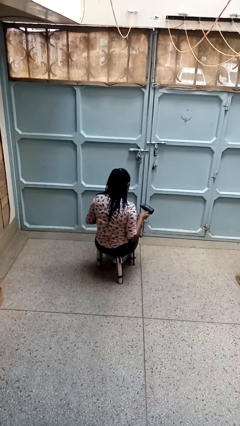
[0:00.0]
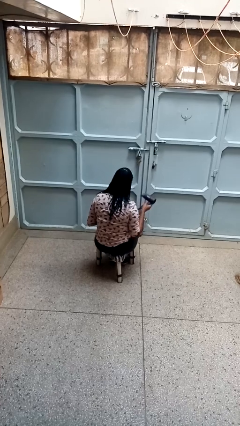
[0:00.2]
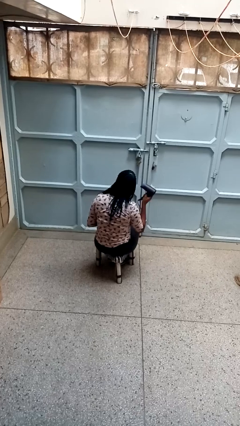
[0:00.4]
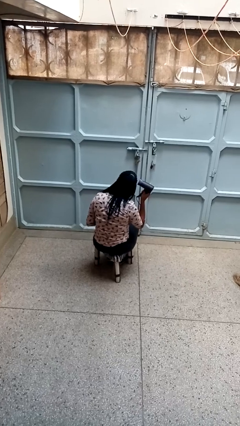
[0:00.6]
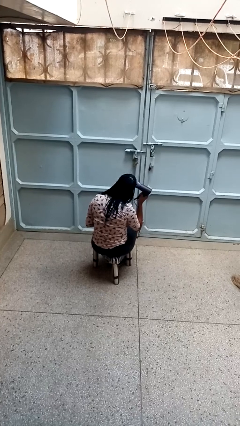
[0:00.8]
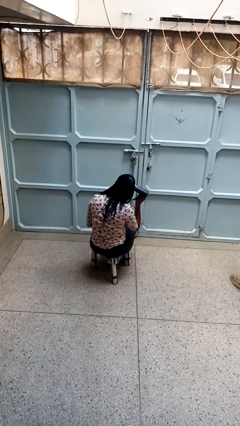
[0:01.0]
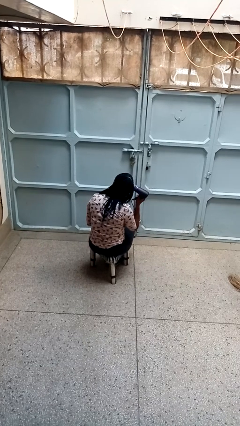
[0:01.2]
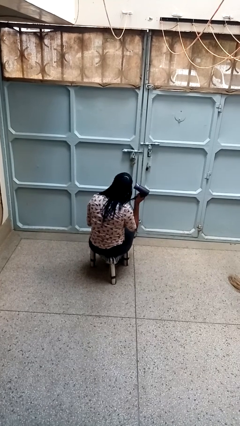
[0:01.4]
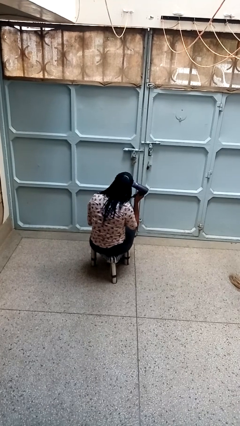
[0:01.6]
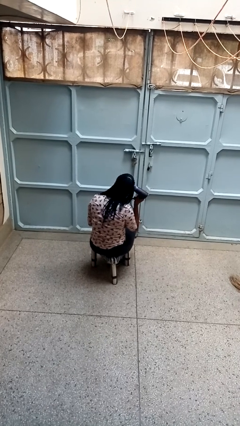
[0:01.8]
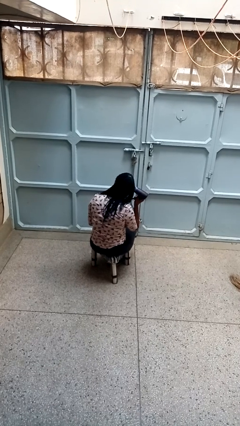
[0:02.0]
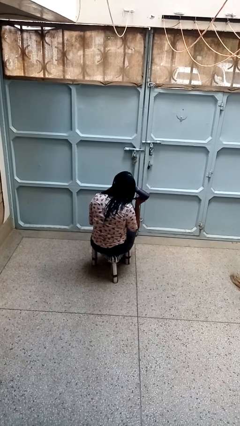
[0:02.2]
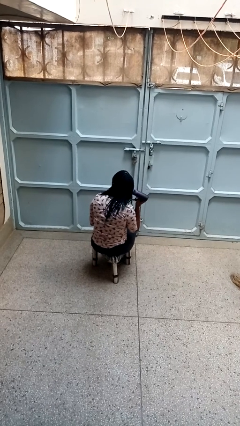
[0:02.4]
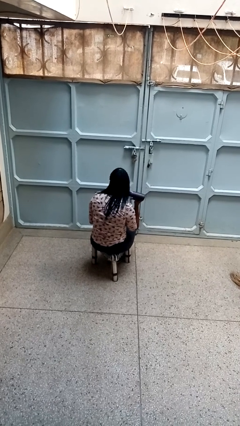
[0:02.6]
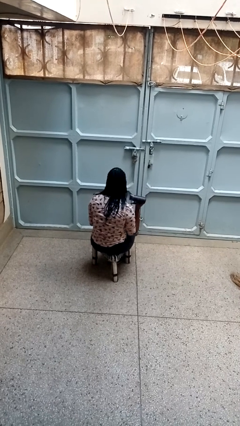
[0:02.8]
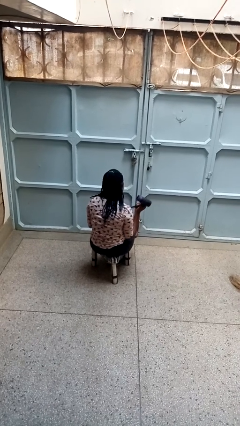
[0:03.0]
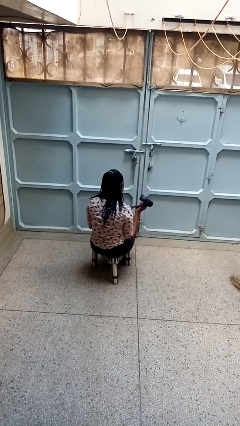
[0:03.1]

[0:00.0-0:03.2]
person dries hair with hairdryer

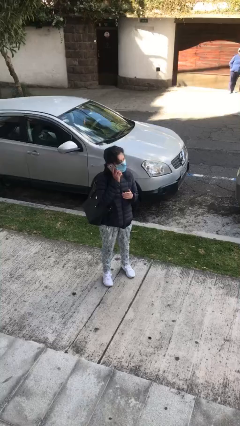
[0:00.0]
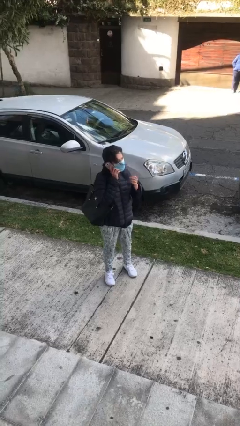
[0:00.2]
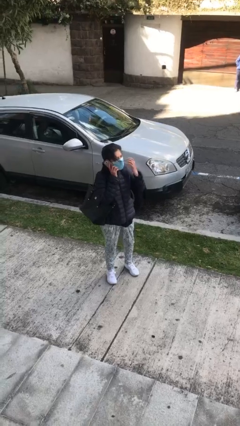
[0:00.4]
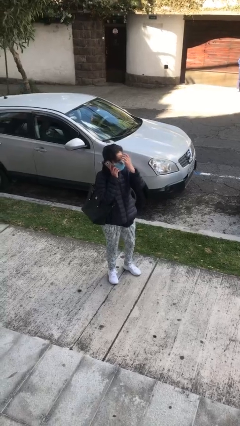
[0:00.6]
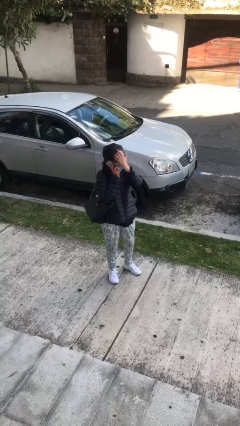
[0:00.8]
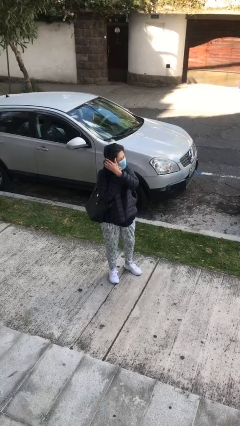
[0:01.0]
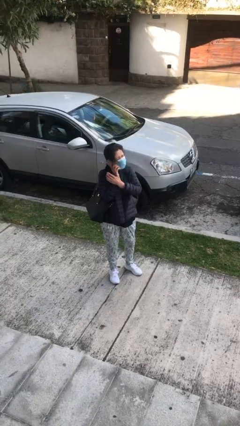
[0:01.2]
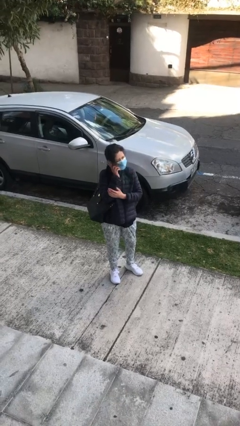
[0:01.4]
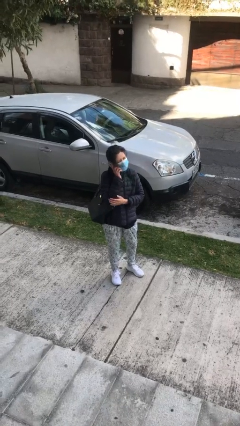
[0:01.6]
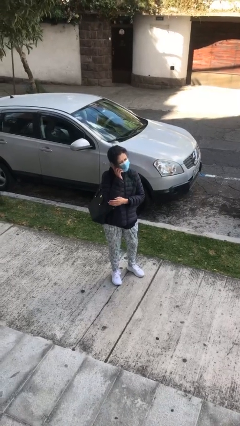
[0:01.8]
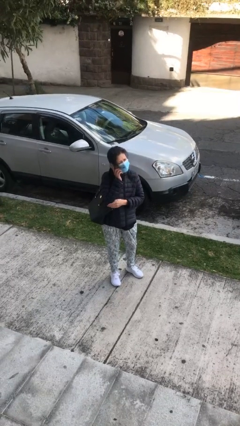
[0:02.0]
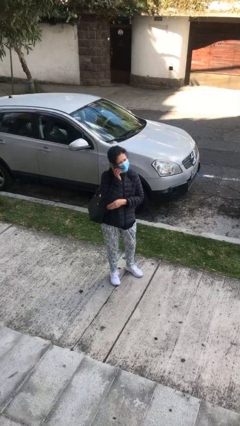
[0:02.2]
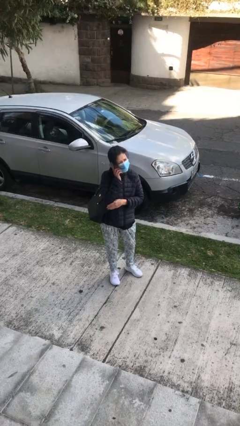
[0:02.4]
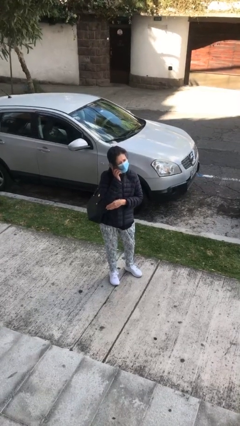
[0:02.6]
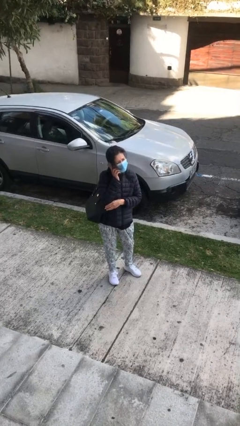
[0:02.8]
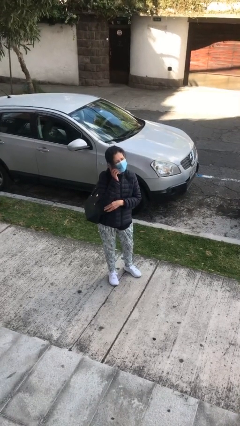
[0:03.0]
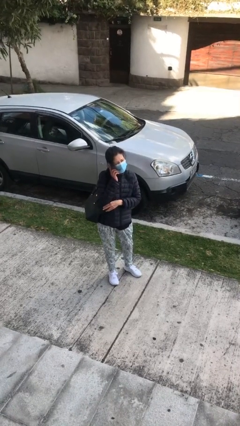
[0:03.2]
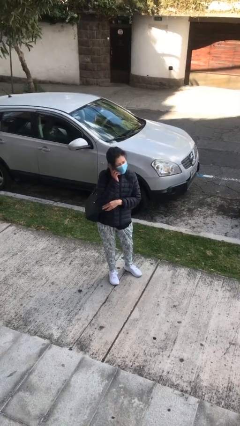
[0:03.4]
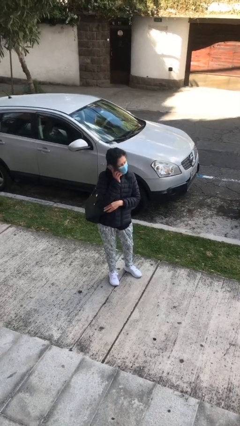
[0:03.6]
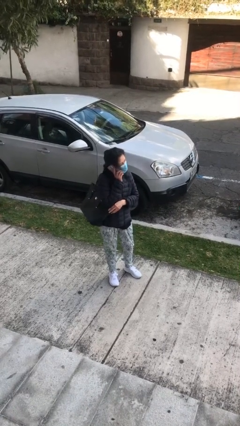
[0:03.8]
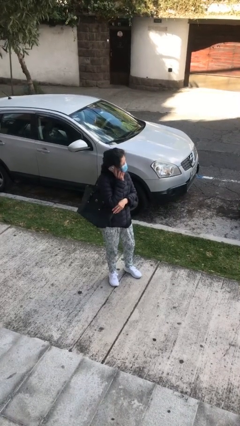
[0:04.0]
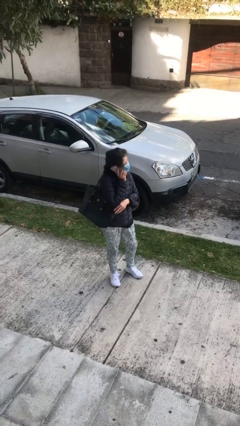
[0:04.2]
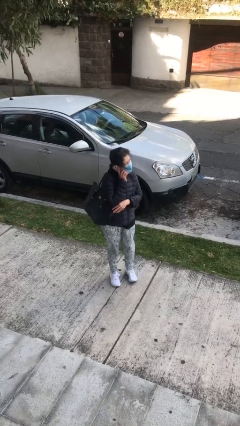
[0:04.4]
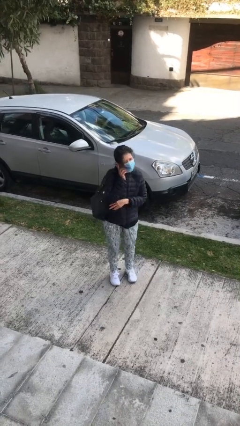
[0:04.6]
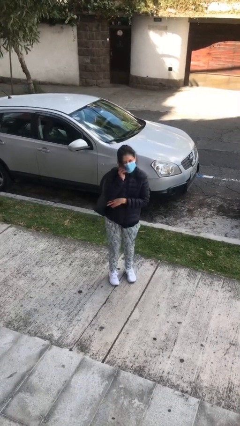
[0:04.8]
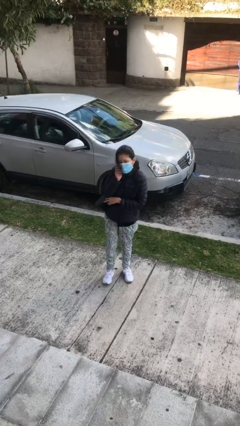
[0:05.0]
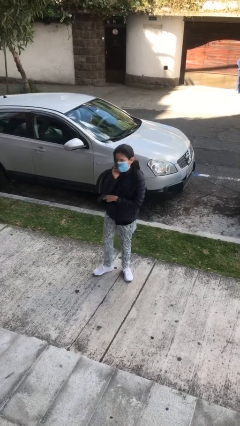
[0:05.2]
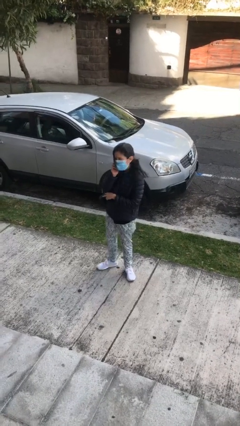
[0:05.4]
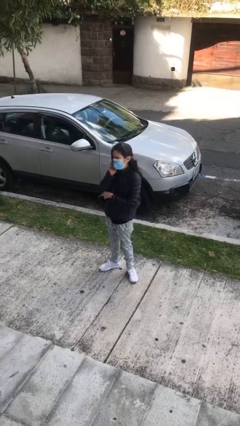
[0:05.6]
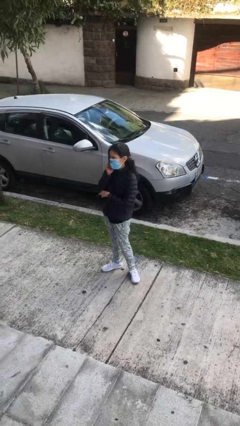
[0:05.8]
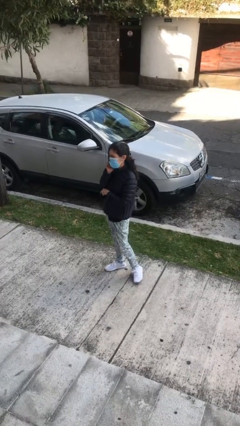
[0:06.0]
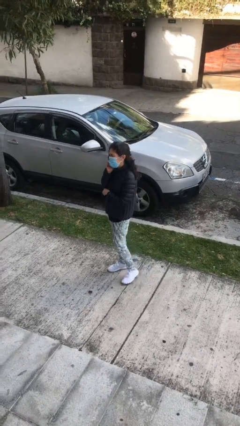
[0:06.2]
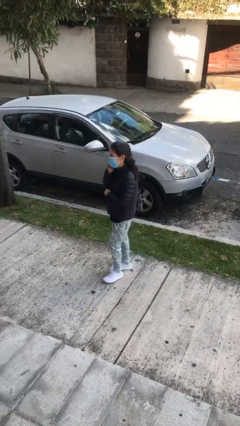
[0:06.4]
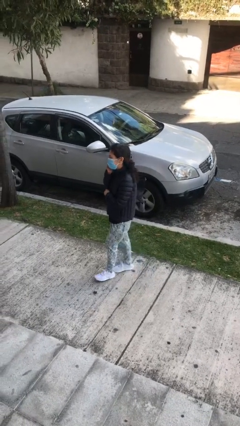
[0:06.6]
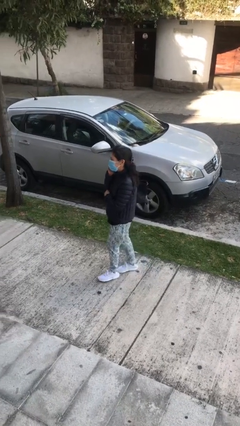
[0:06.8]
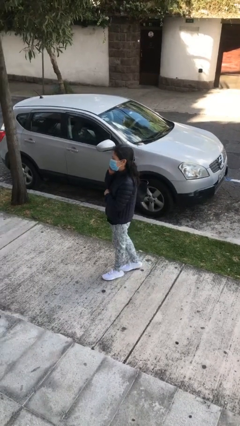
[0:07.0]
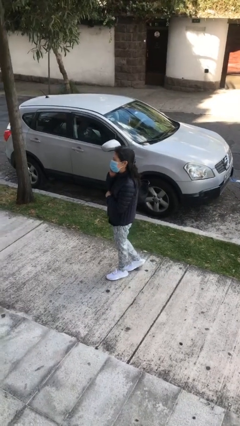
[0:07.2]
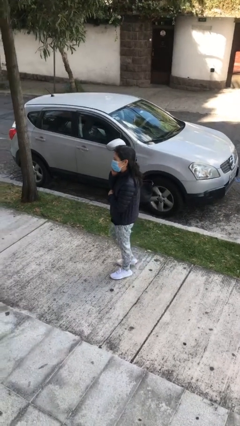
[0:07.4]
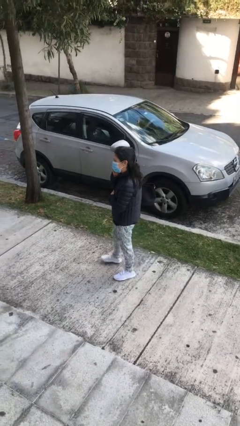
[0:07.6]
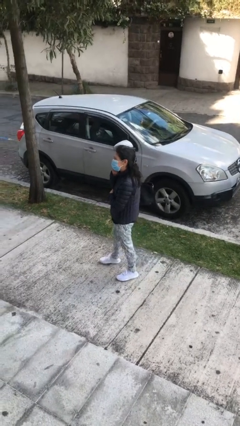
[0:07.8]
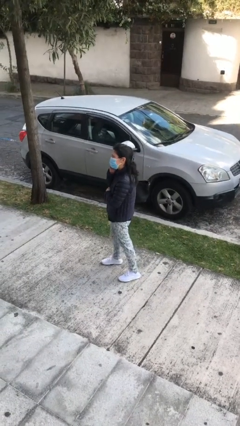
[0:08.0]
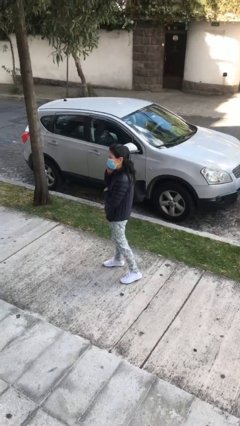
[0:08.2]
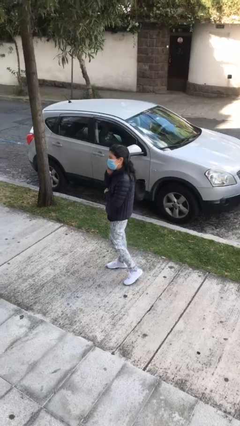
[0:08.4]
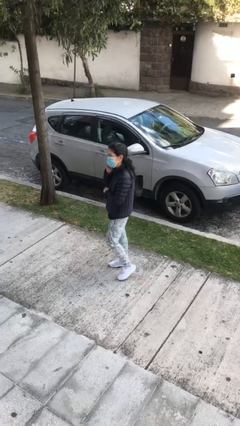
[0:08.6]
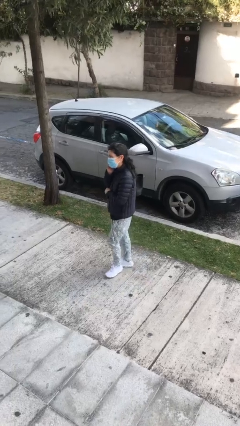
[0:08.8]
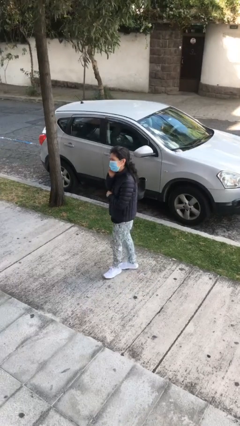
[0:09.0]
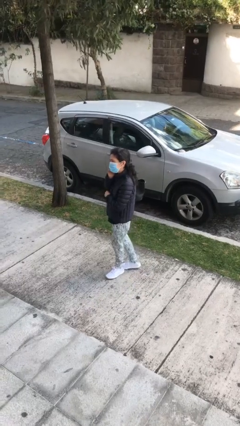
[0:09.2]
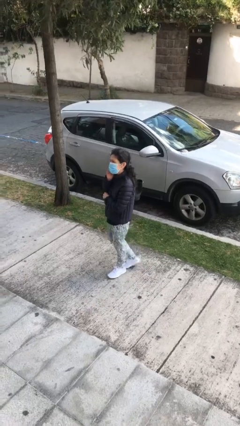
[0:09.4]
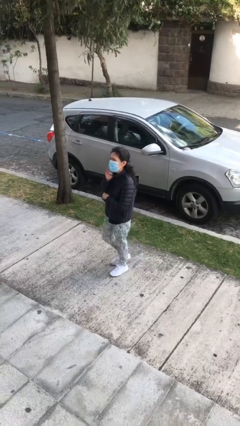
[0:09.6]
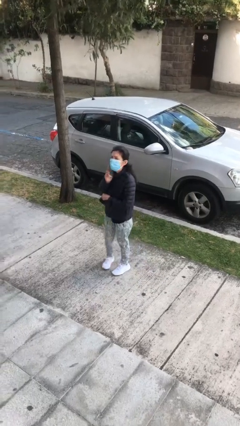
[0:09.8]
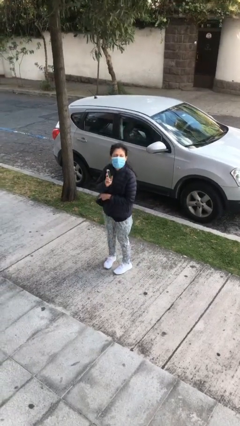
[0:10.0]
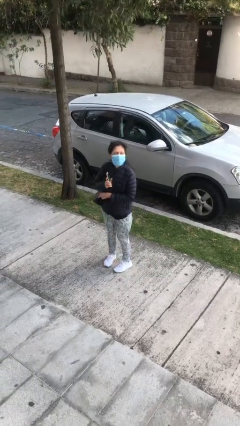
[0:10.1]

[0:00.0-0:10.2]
person talks on phone

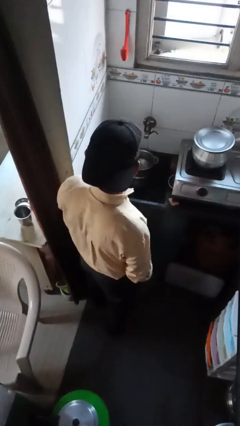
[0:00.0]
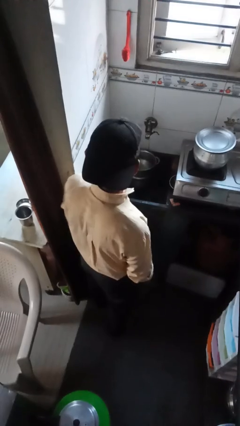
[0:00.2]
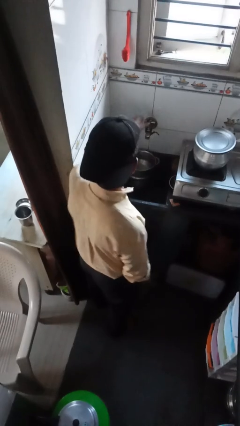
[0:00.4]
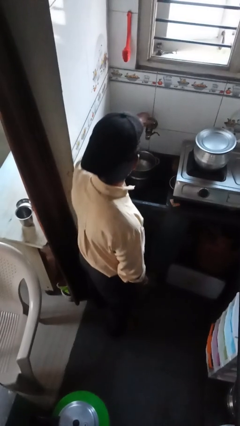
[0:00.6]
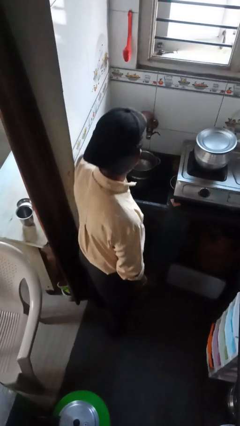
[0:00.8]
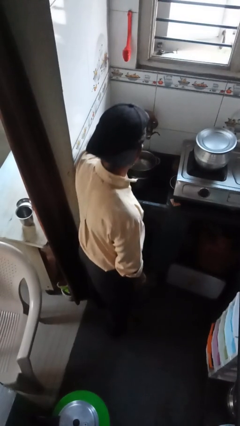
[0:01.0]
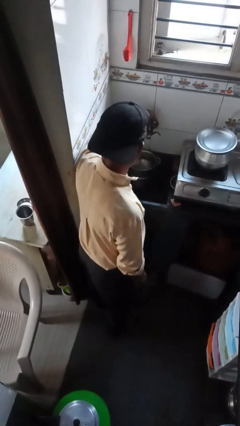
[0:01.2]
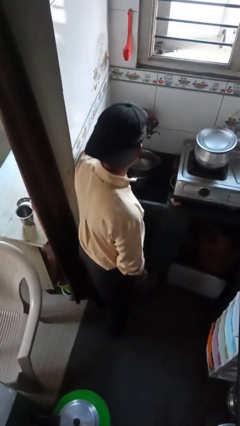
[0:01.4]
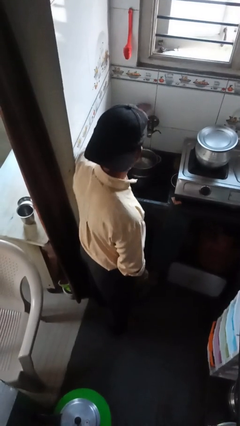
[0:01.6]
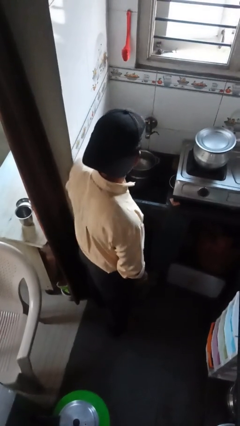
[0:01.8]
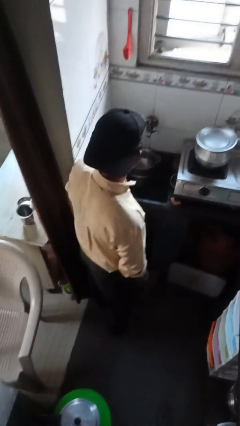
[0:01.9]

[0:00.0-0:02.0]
person turns off faucet

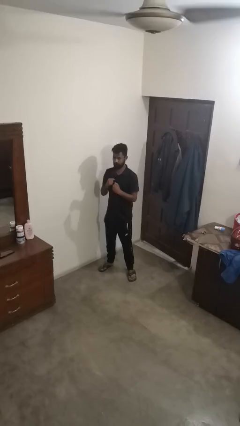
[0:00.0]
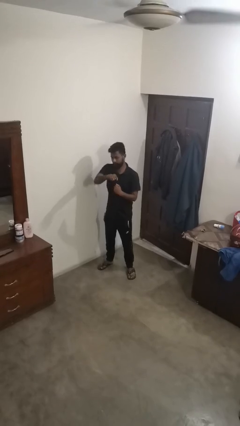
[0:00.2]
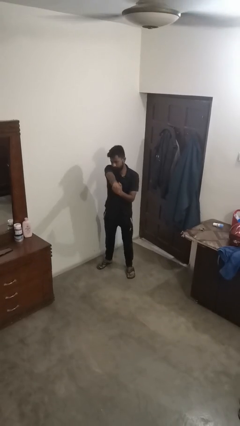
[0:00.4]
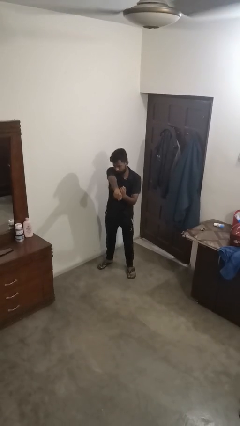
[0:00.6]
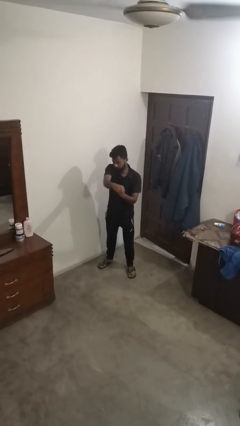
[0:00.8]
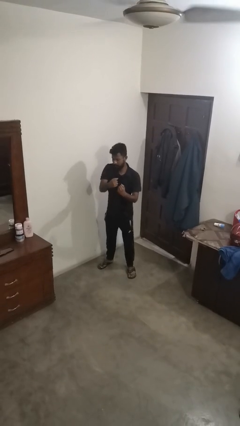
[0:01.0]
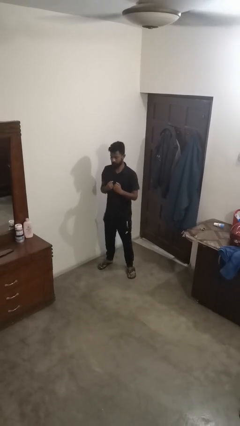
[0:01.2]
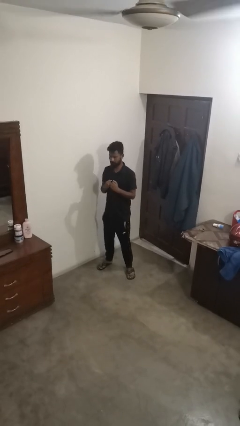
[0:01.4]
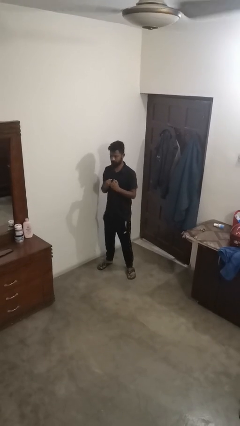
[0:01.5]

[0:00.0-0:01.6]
person punches

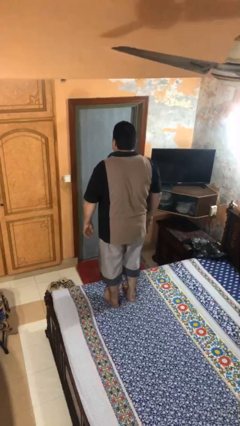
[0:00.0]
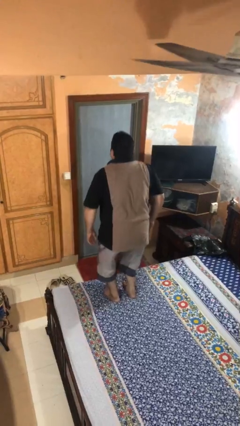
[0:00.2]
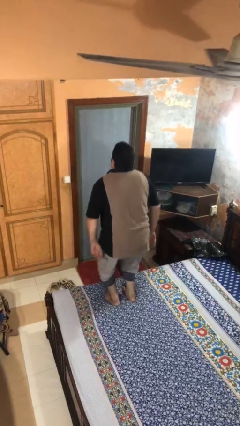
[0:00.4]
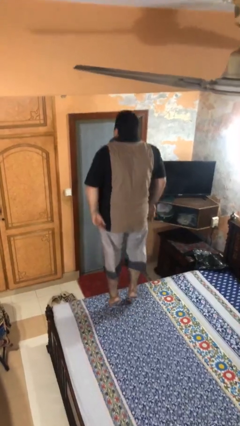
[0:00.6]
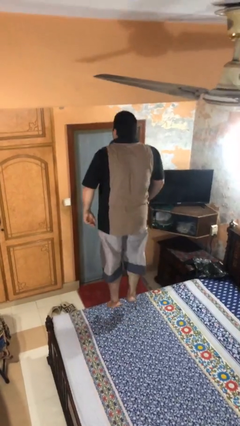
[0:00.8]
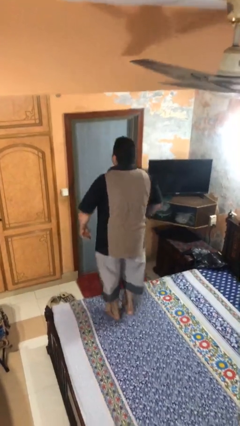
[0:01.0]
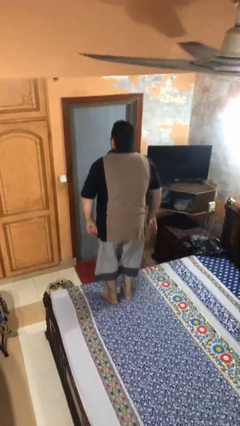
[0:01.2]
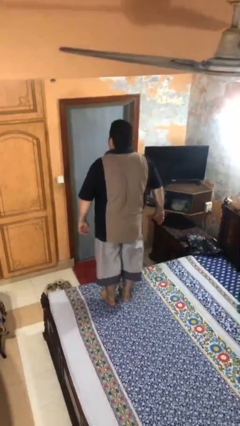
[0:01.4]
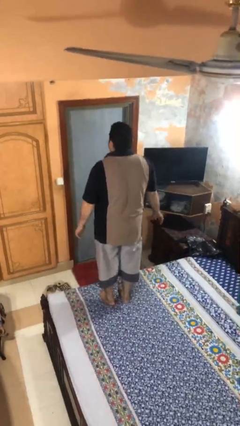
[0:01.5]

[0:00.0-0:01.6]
person jumps on bed
